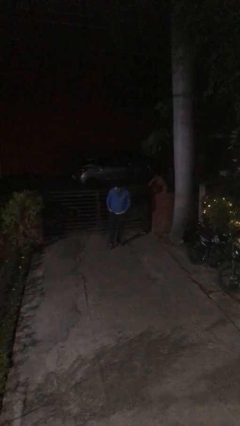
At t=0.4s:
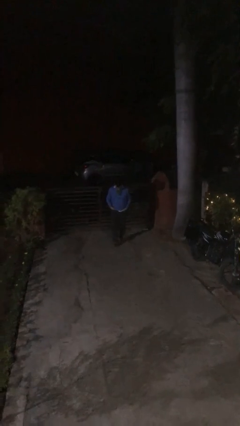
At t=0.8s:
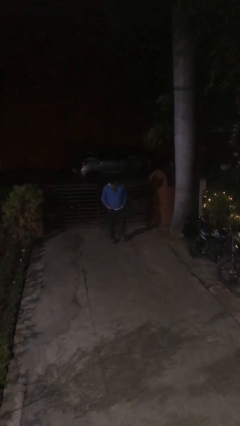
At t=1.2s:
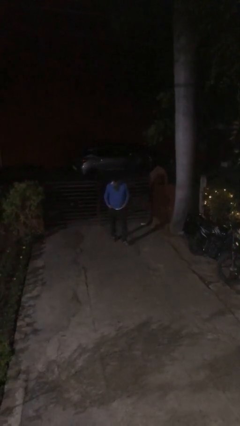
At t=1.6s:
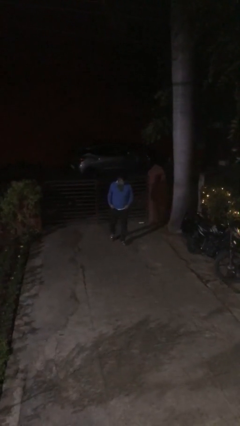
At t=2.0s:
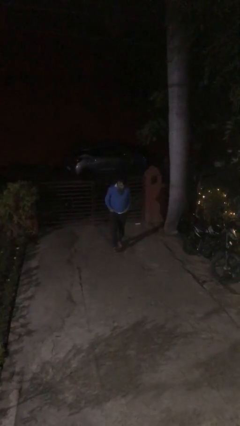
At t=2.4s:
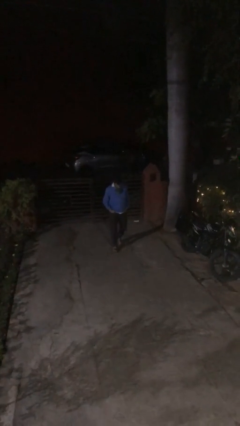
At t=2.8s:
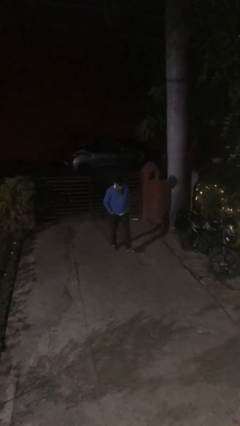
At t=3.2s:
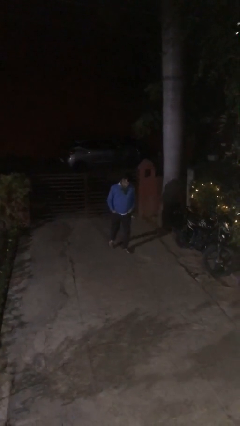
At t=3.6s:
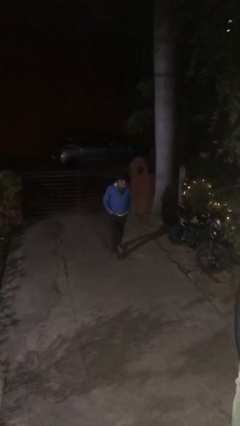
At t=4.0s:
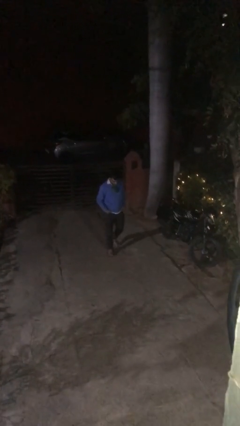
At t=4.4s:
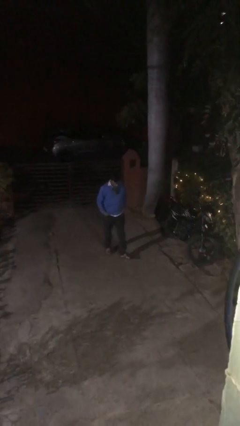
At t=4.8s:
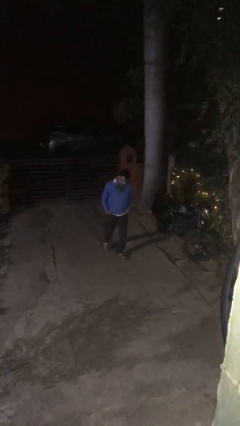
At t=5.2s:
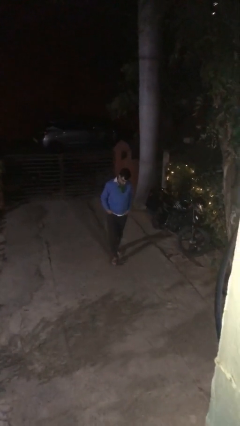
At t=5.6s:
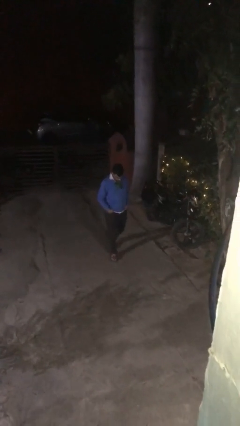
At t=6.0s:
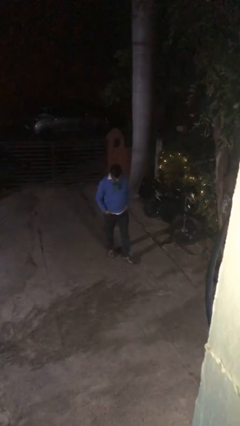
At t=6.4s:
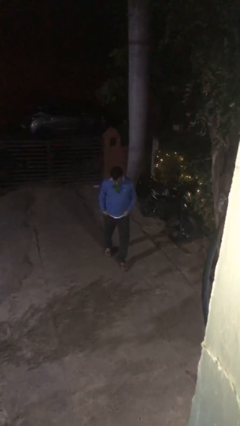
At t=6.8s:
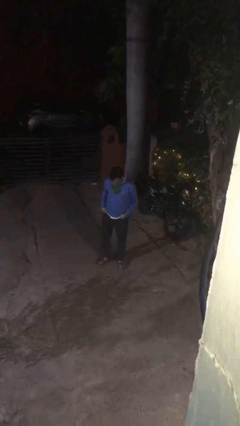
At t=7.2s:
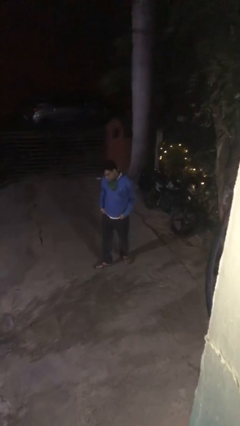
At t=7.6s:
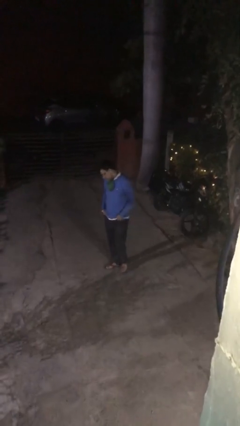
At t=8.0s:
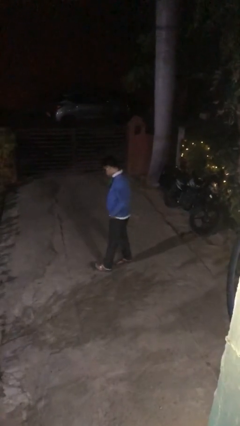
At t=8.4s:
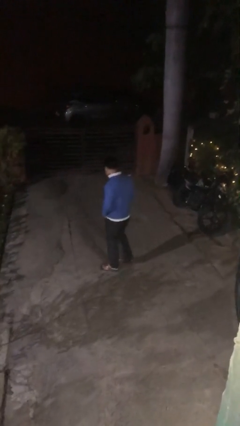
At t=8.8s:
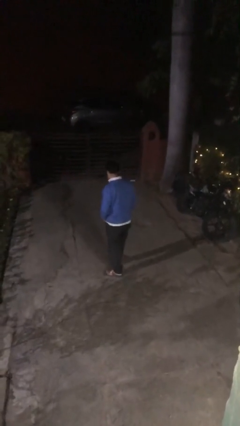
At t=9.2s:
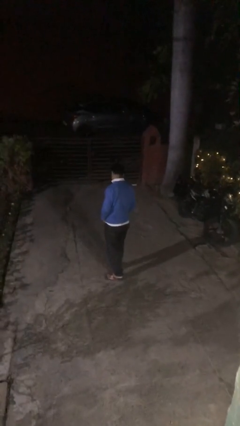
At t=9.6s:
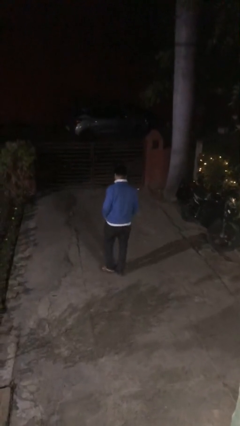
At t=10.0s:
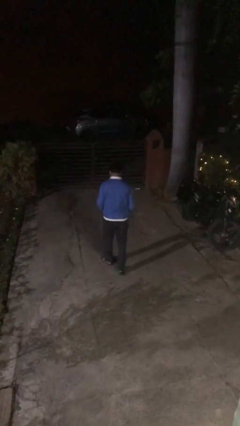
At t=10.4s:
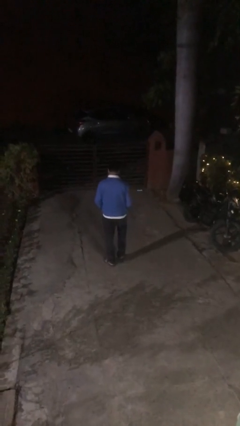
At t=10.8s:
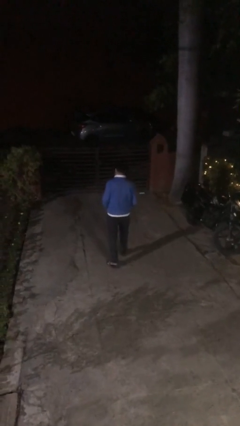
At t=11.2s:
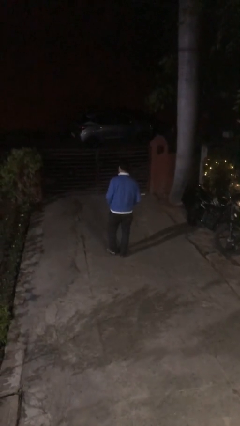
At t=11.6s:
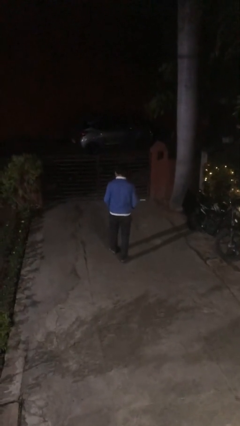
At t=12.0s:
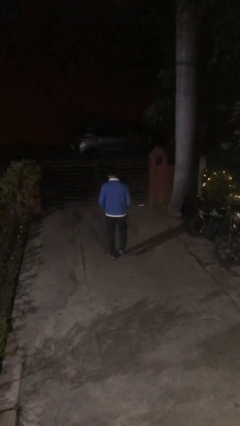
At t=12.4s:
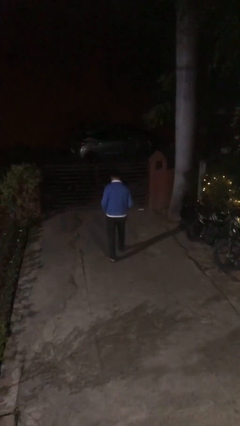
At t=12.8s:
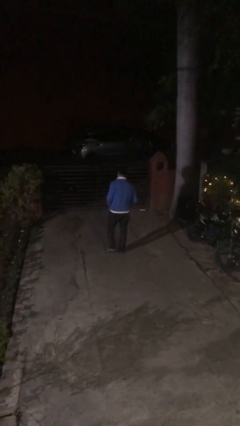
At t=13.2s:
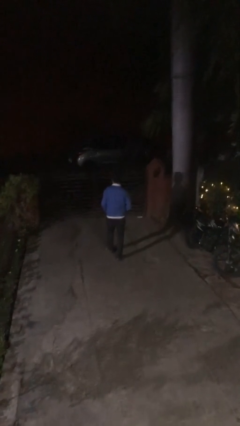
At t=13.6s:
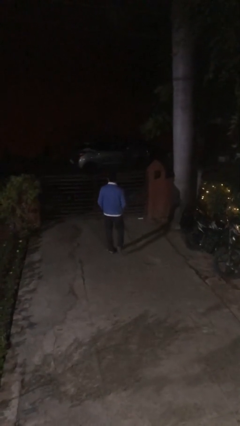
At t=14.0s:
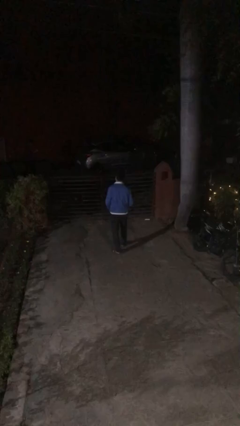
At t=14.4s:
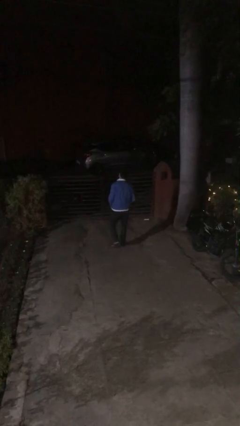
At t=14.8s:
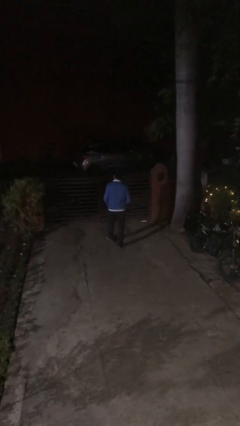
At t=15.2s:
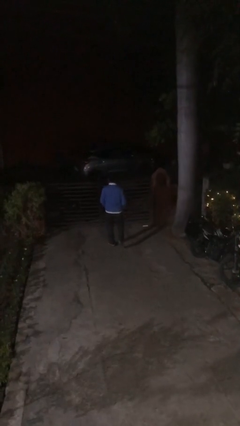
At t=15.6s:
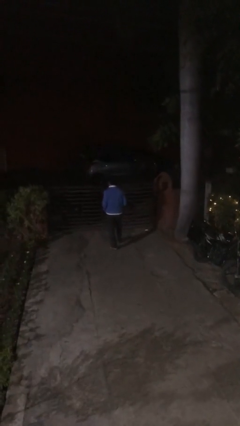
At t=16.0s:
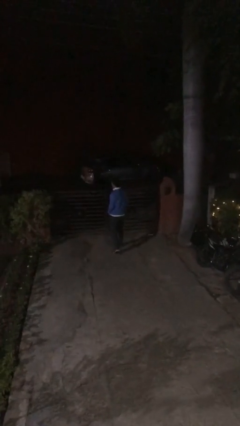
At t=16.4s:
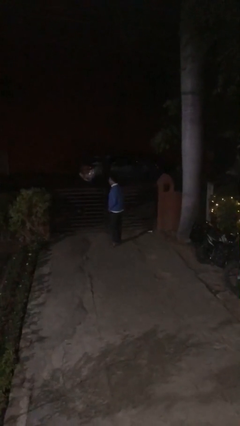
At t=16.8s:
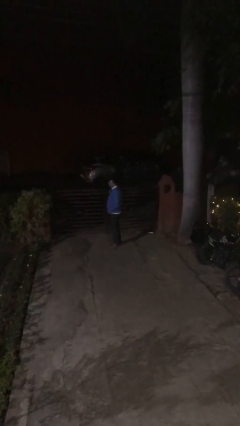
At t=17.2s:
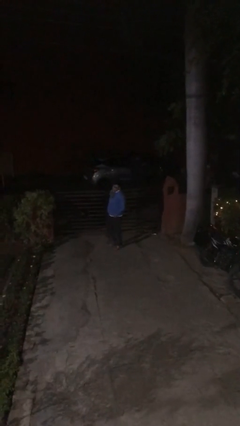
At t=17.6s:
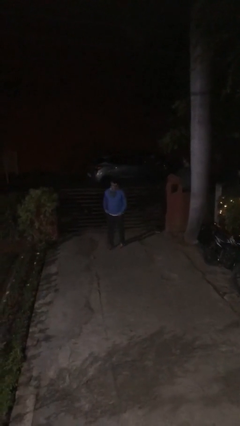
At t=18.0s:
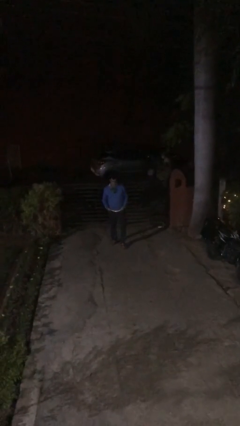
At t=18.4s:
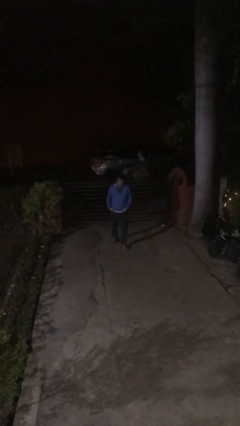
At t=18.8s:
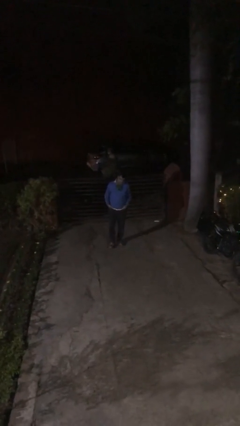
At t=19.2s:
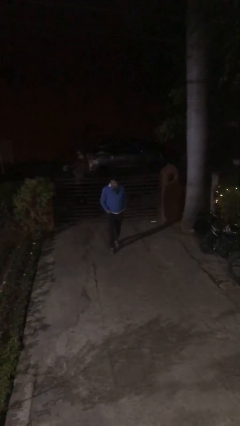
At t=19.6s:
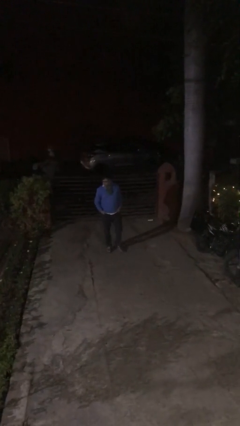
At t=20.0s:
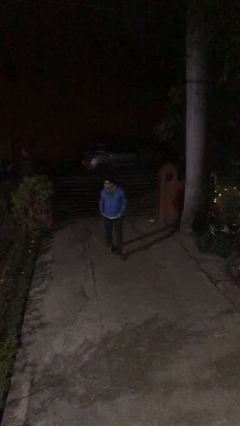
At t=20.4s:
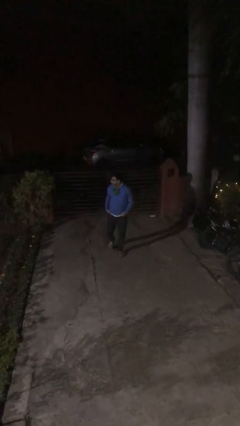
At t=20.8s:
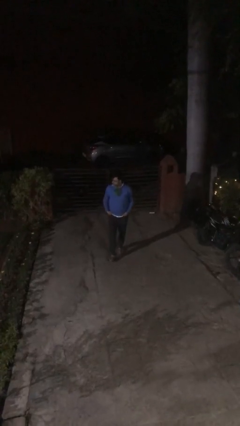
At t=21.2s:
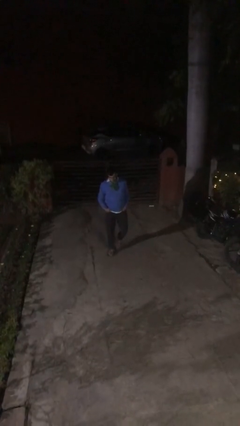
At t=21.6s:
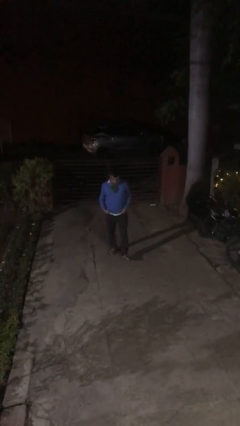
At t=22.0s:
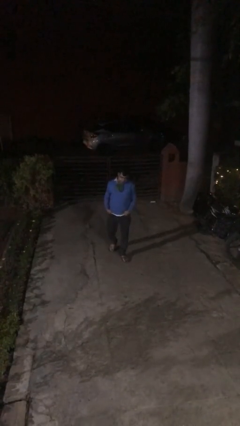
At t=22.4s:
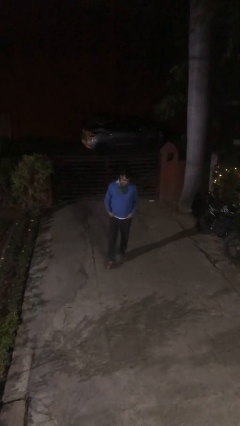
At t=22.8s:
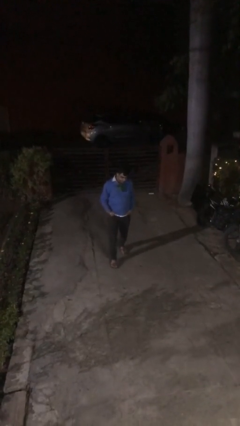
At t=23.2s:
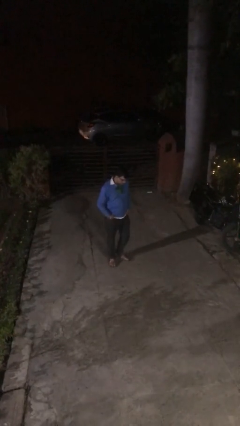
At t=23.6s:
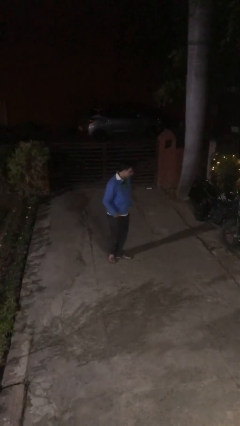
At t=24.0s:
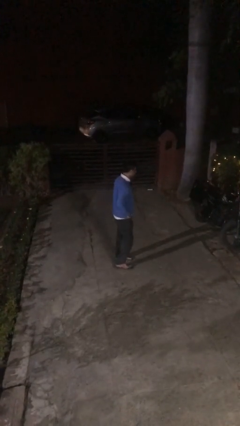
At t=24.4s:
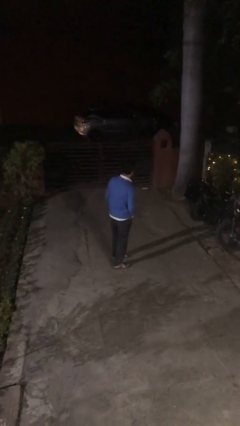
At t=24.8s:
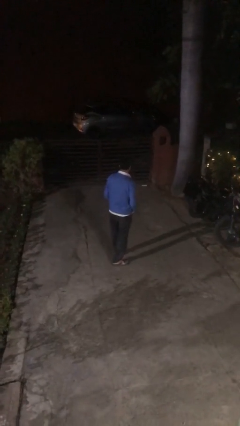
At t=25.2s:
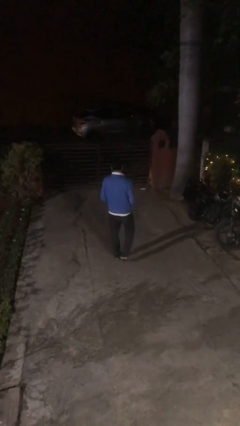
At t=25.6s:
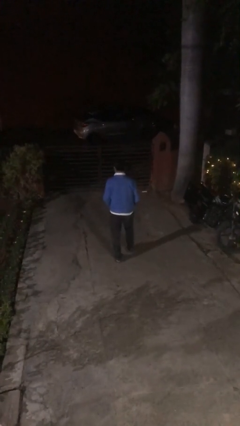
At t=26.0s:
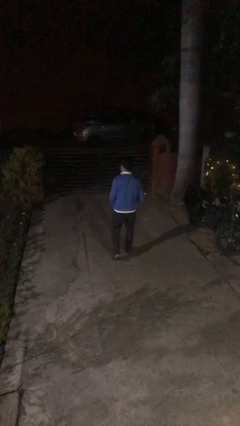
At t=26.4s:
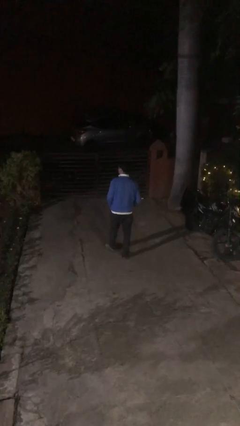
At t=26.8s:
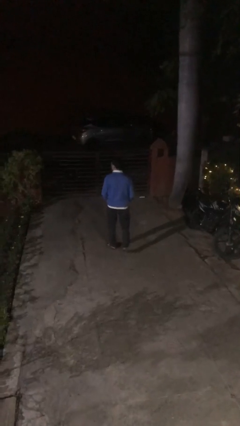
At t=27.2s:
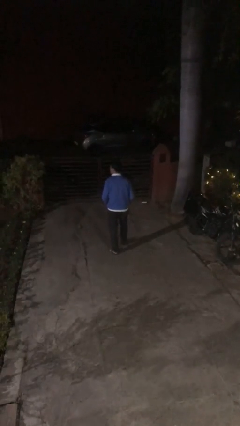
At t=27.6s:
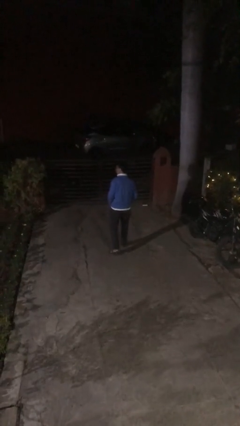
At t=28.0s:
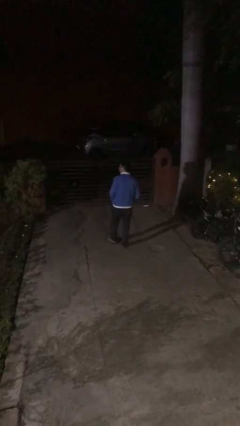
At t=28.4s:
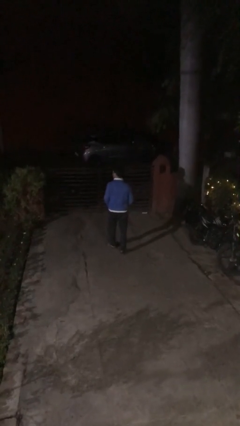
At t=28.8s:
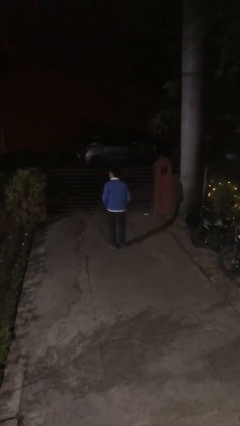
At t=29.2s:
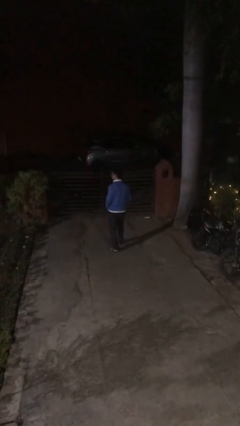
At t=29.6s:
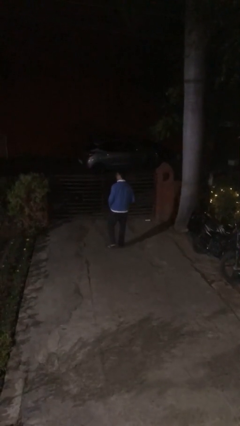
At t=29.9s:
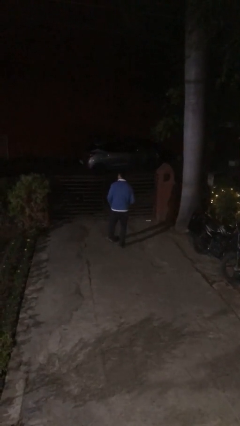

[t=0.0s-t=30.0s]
person walks
